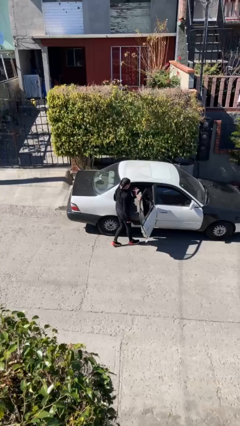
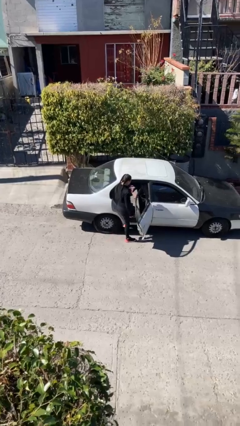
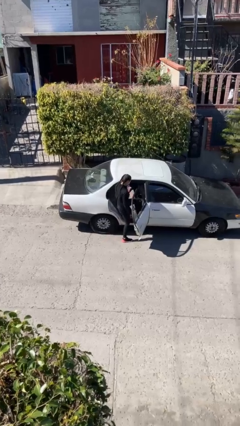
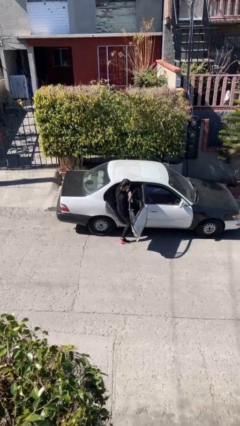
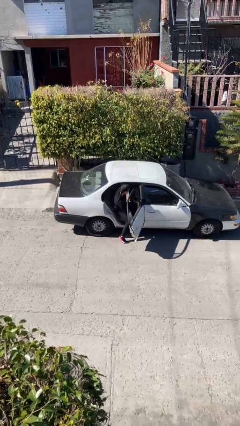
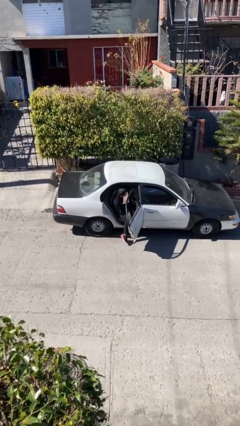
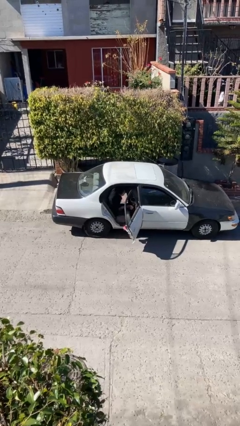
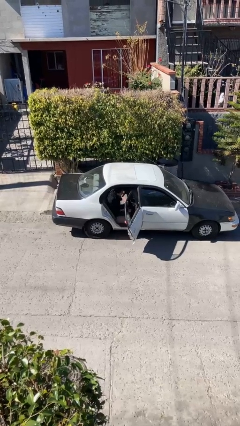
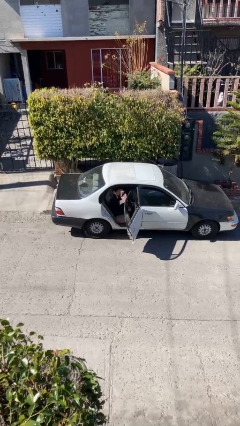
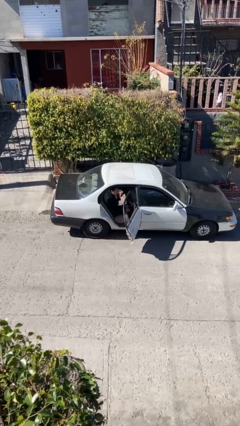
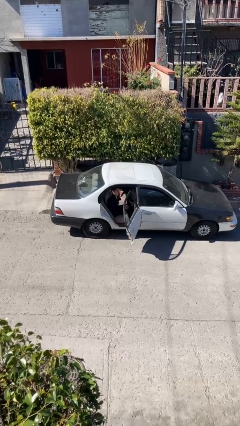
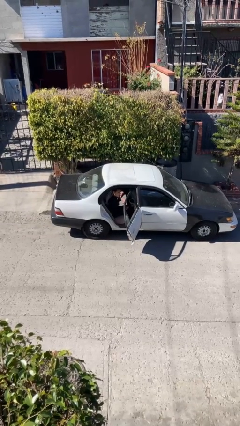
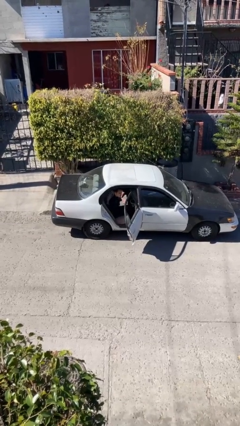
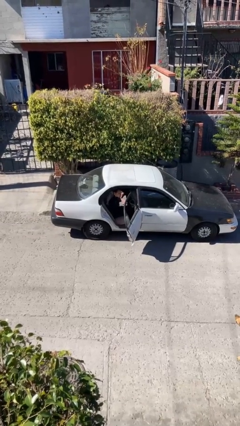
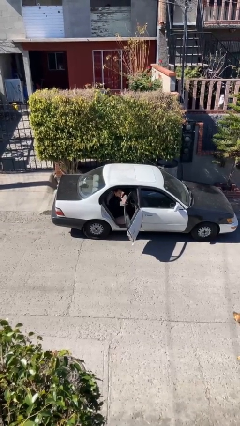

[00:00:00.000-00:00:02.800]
person enters car

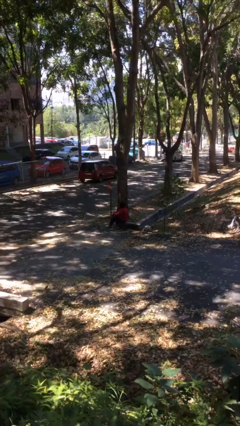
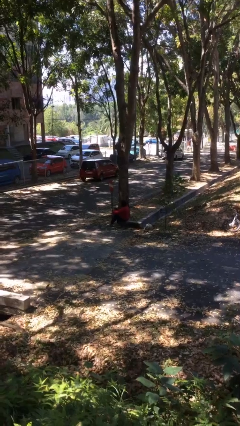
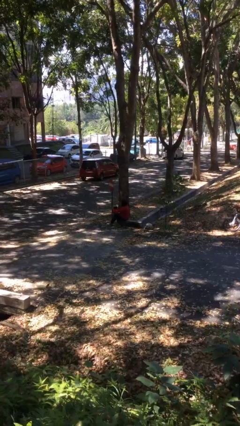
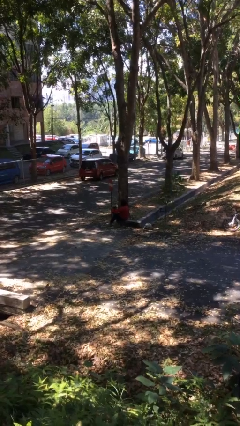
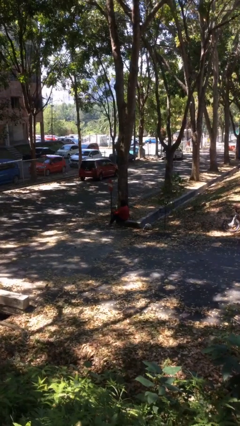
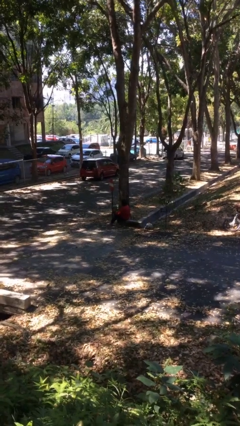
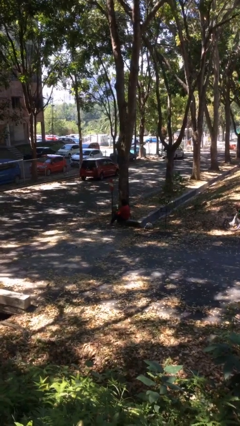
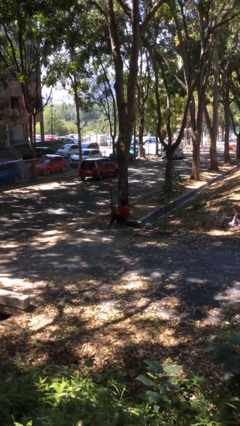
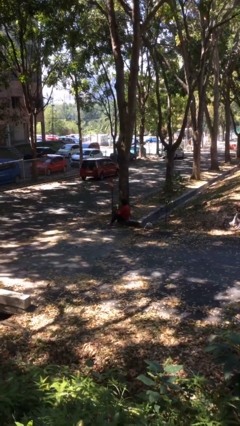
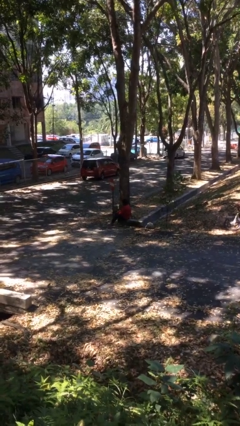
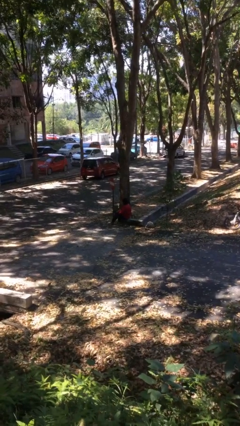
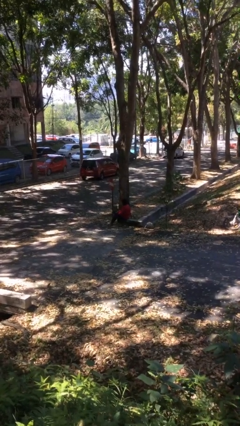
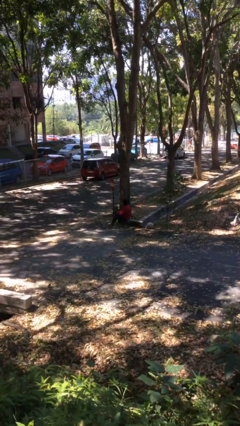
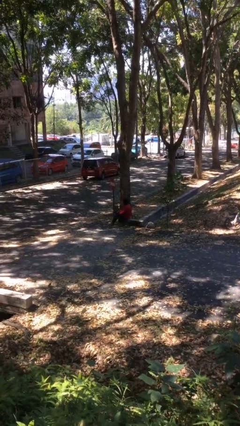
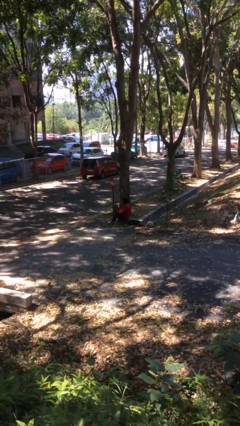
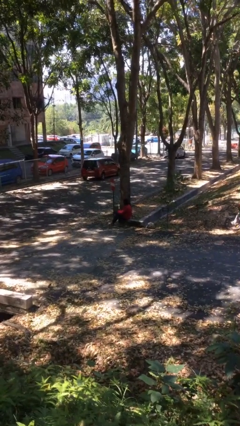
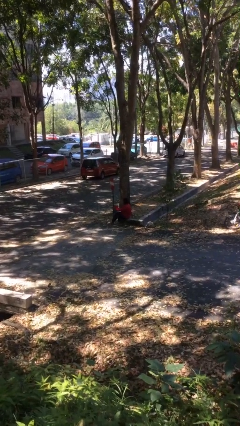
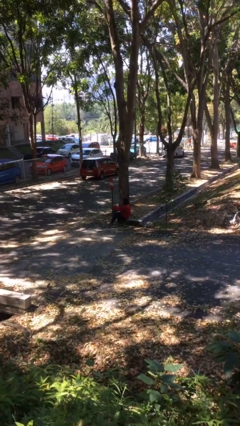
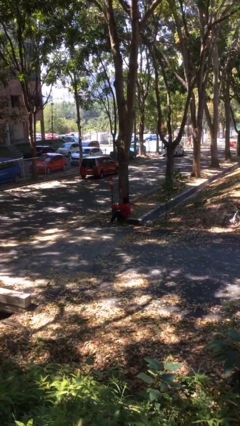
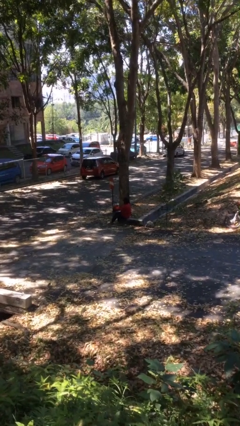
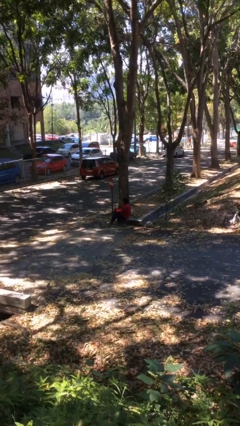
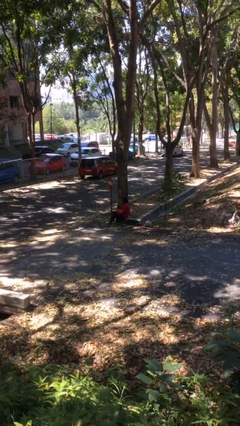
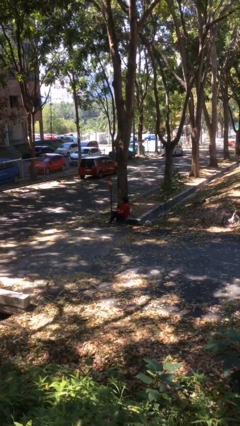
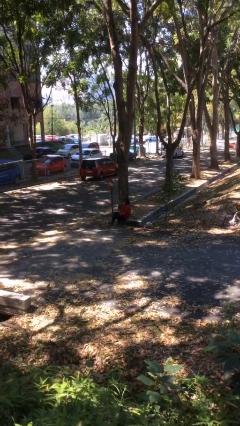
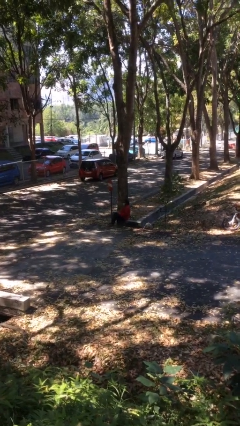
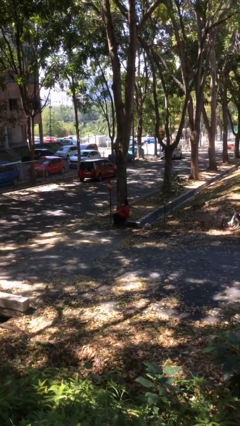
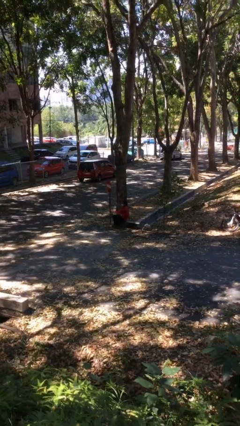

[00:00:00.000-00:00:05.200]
person interacts with laptop

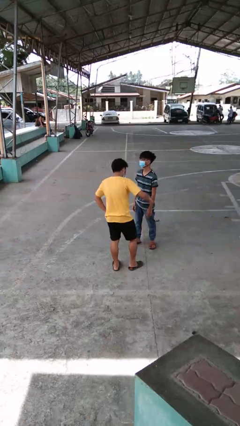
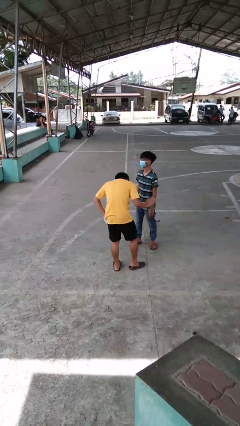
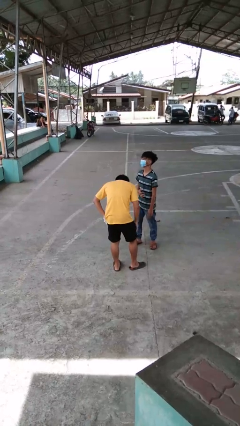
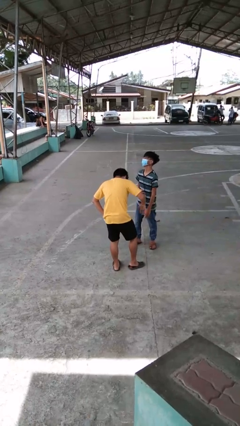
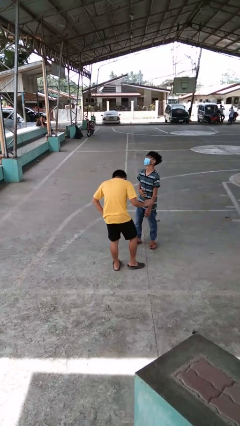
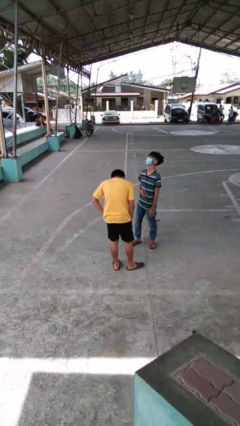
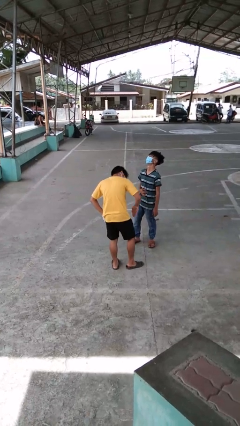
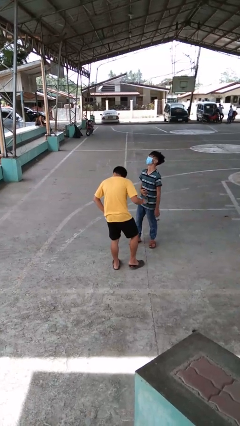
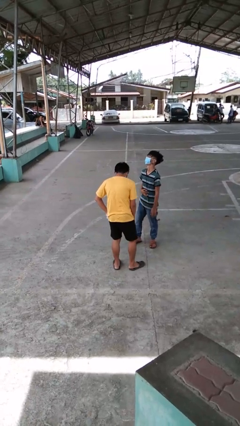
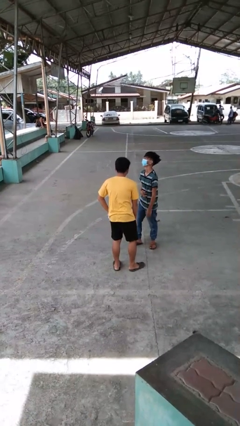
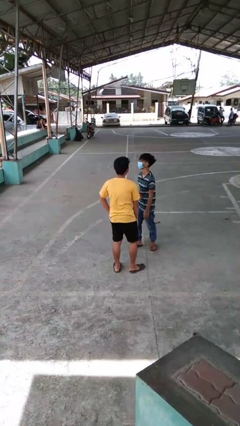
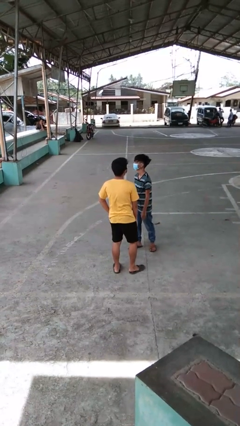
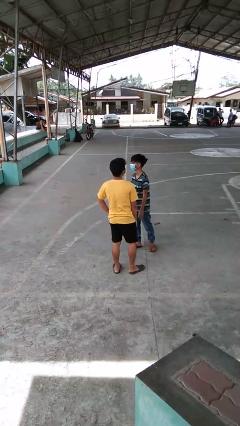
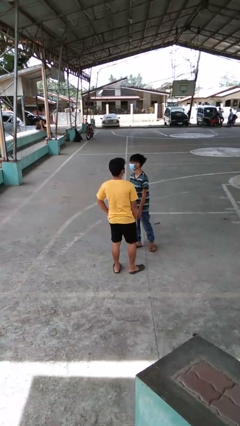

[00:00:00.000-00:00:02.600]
person laughs with person

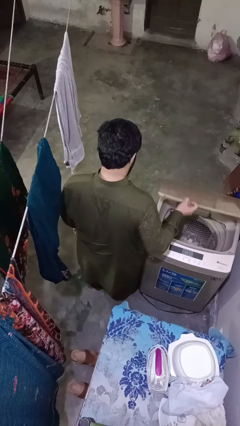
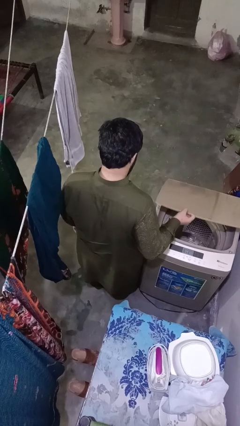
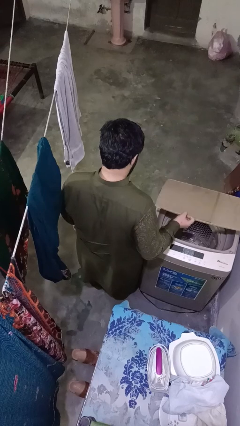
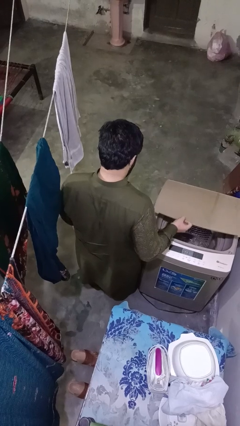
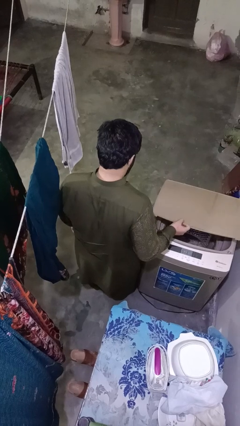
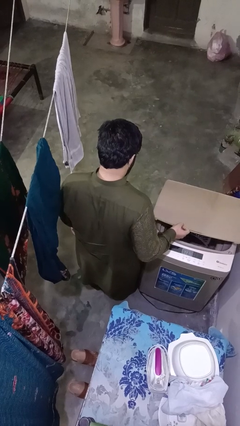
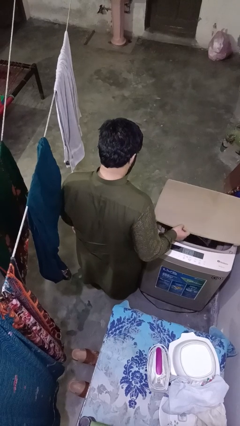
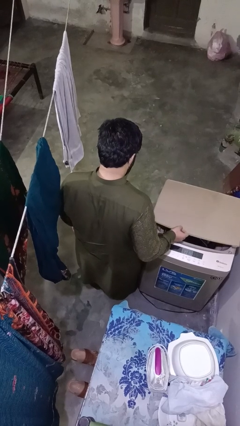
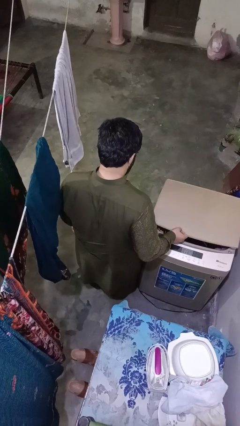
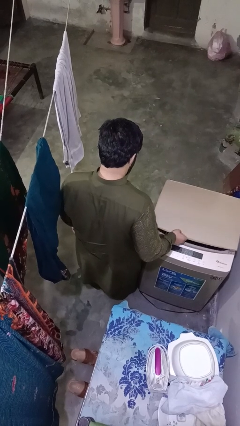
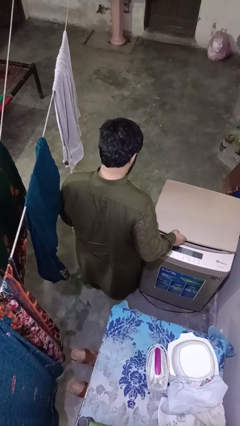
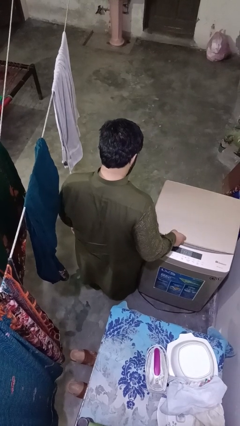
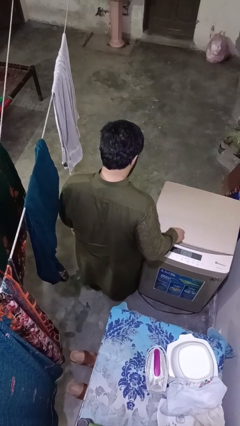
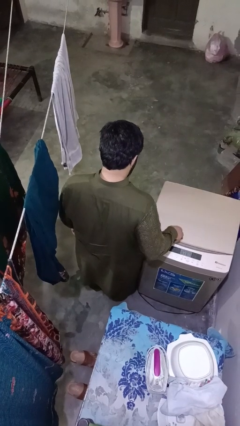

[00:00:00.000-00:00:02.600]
person closes clothes washer

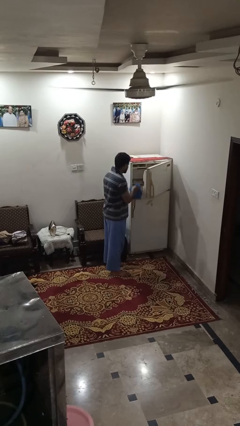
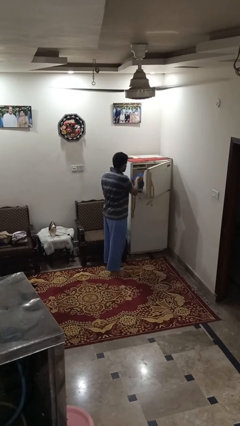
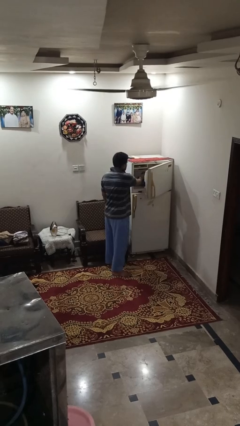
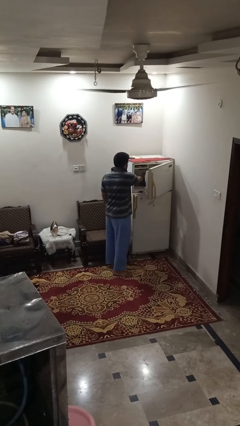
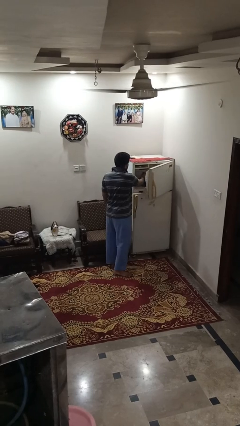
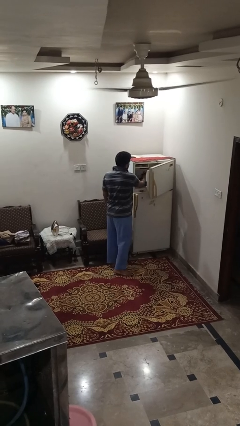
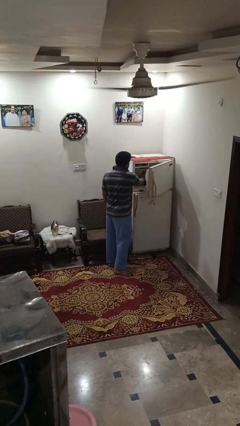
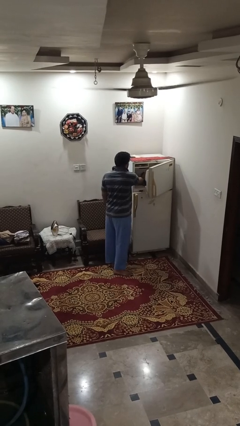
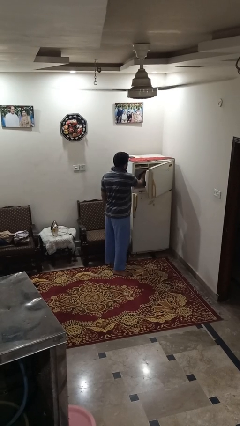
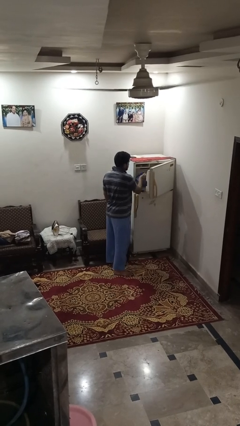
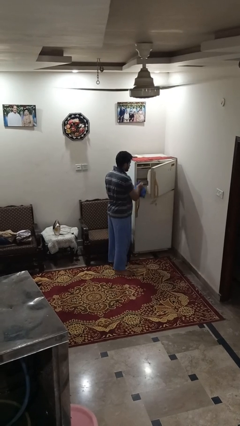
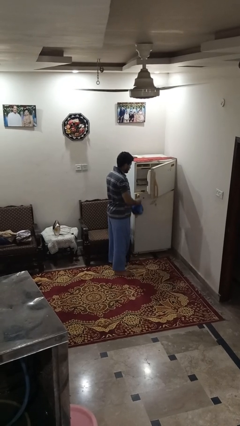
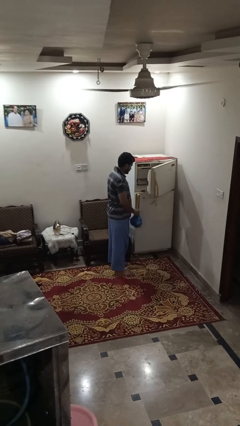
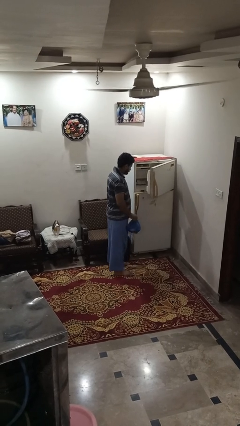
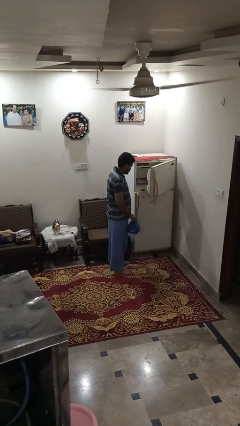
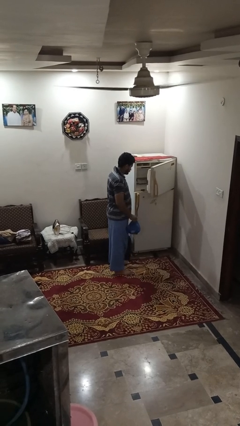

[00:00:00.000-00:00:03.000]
person loads groceries into refrigerator

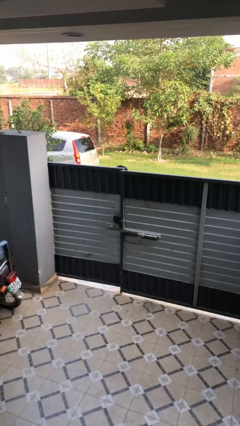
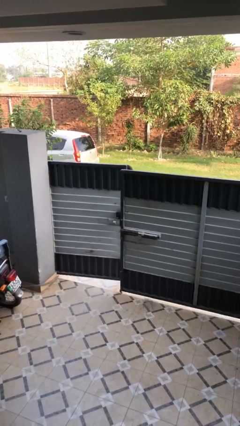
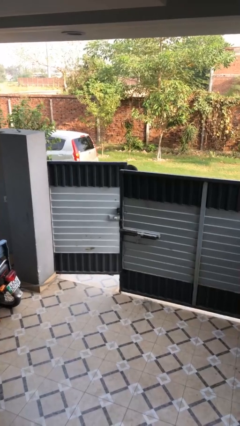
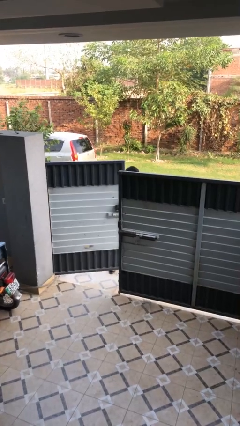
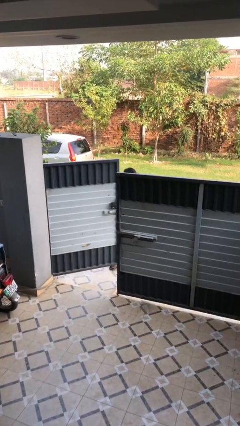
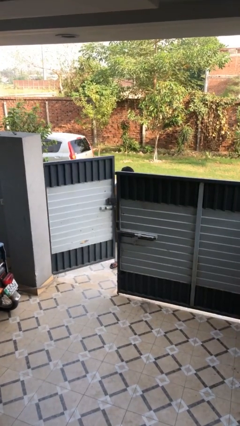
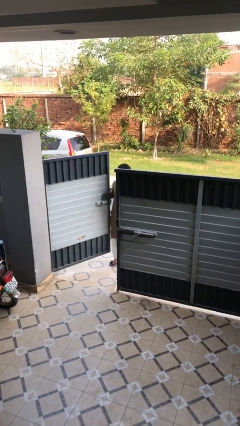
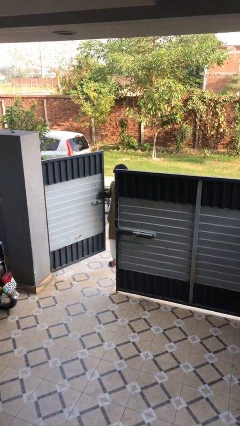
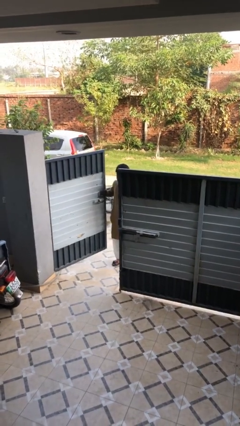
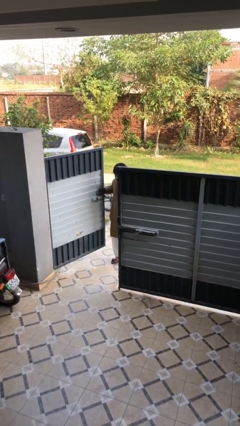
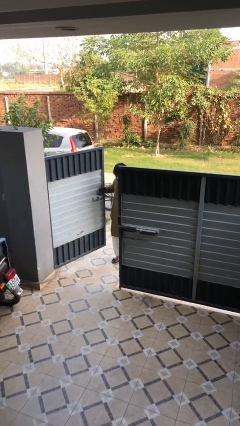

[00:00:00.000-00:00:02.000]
person opens facility door
